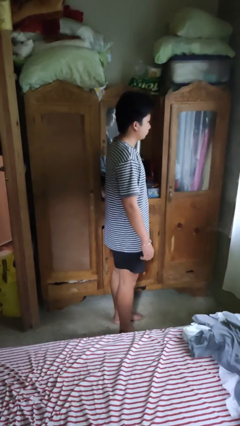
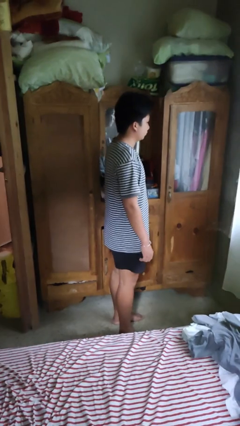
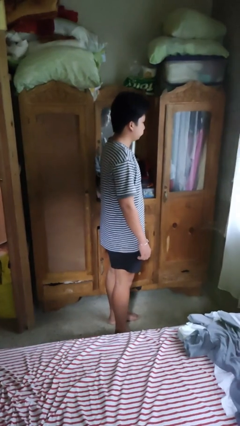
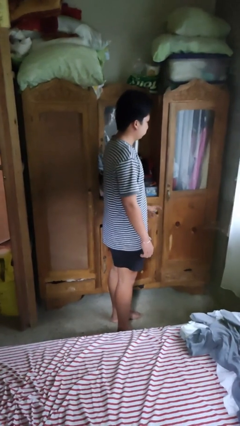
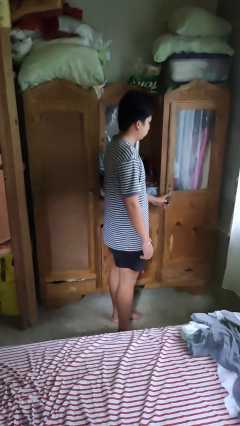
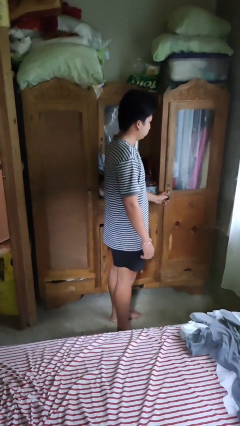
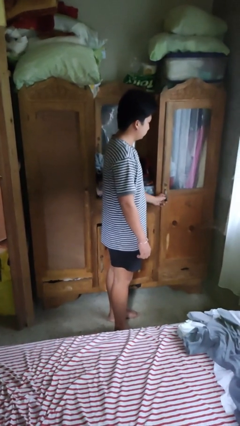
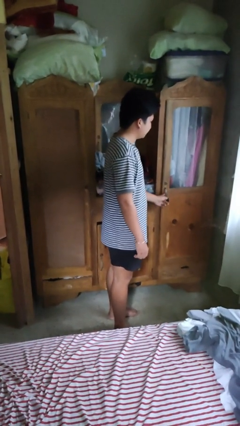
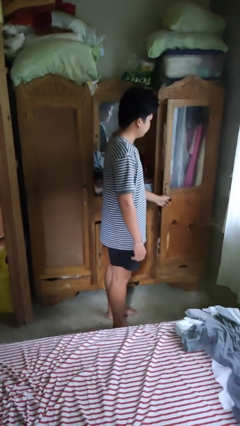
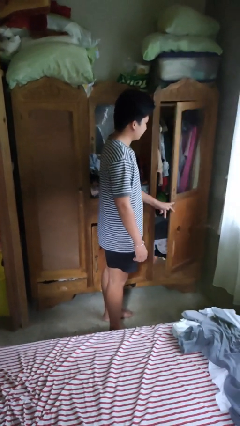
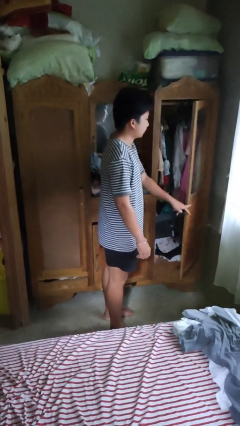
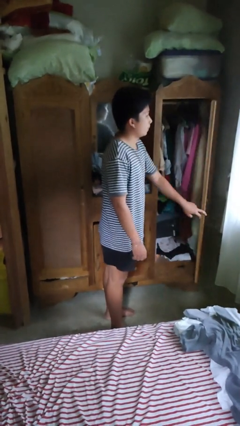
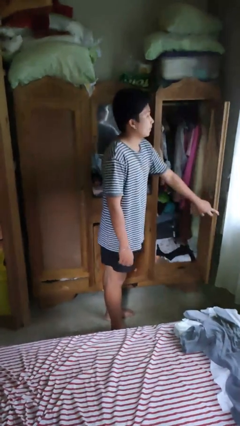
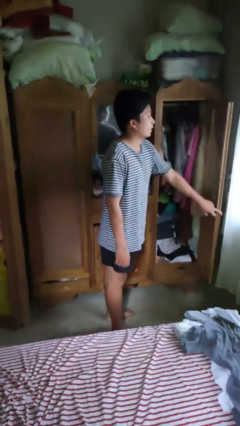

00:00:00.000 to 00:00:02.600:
person opens closet door

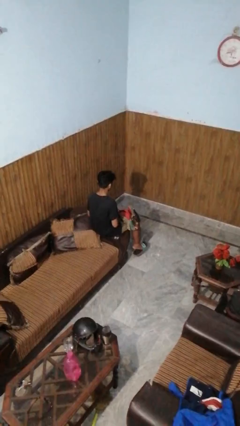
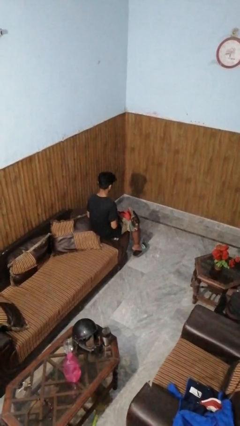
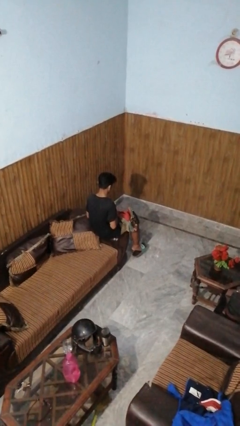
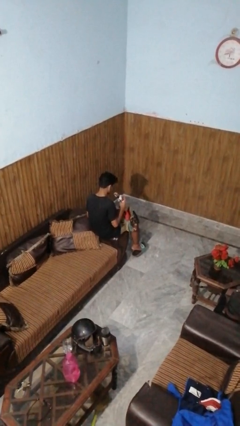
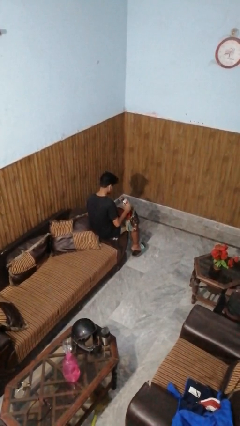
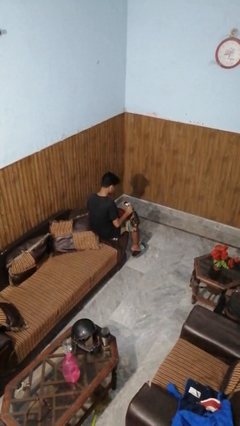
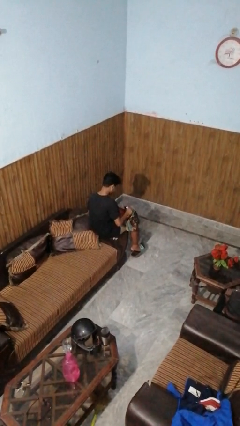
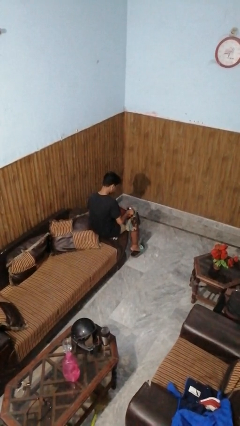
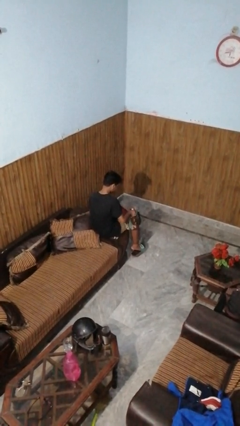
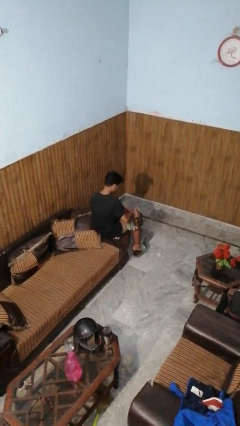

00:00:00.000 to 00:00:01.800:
person puts object into purse

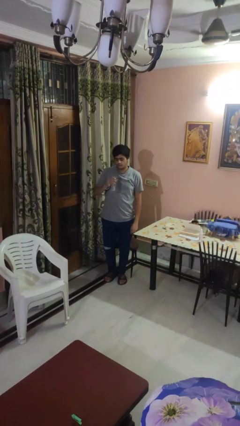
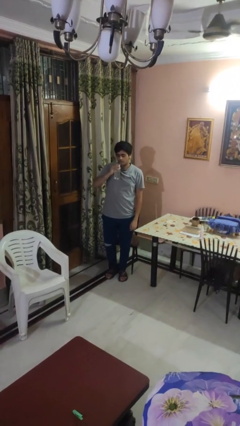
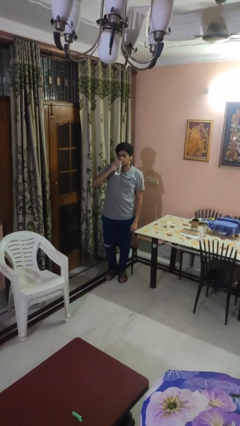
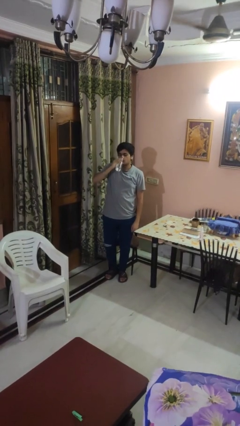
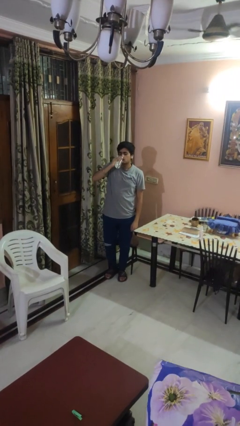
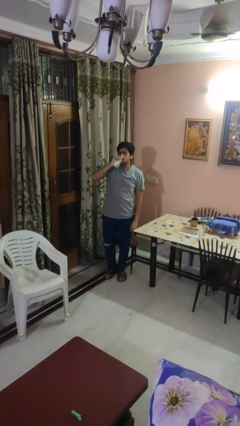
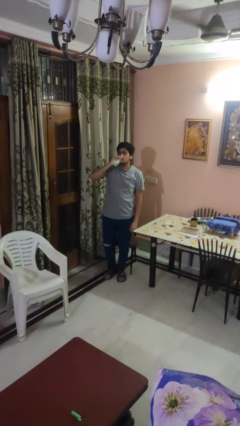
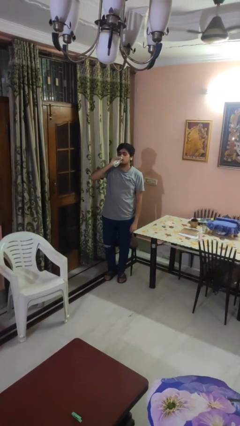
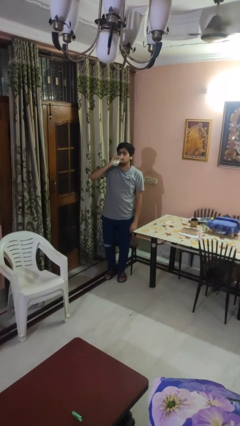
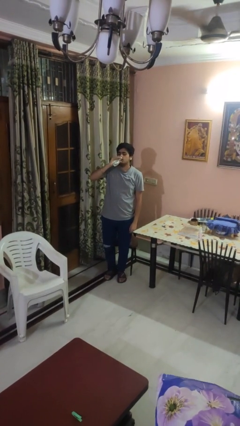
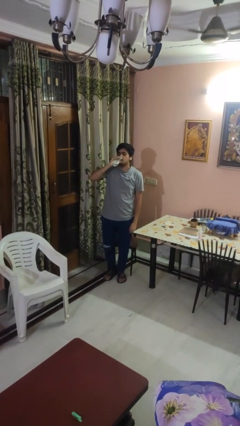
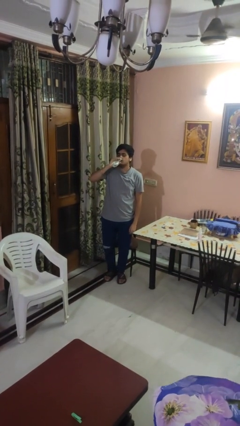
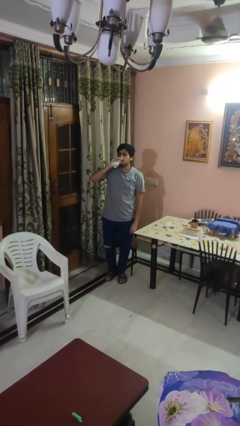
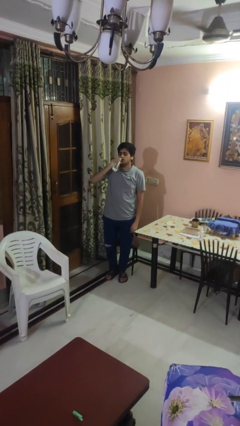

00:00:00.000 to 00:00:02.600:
person drinks from bottle

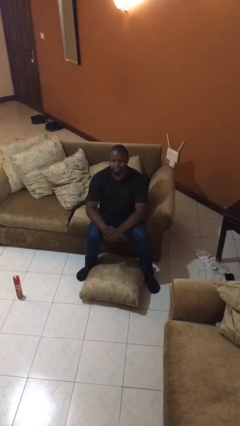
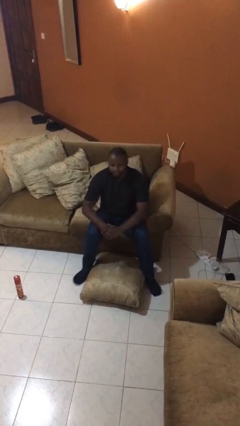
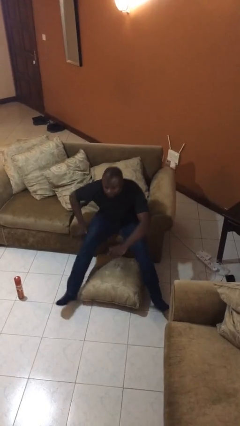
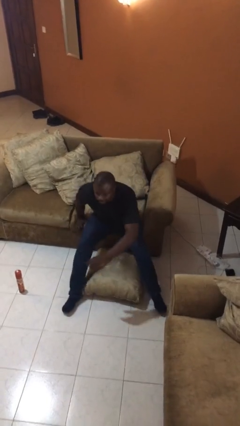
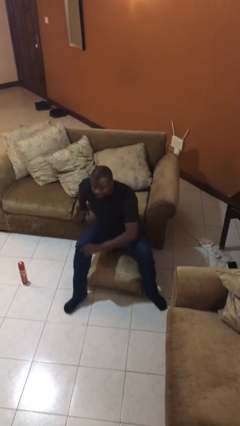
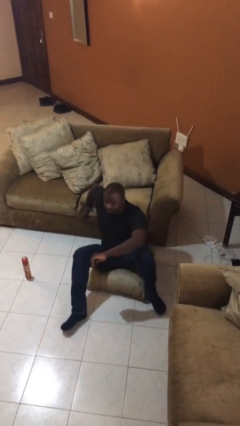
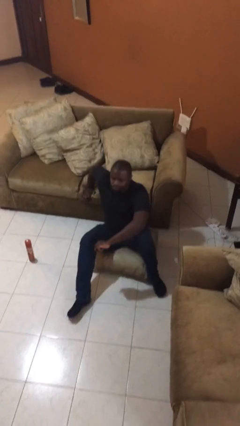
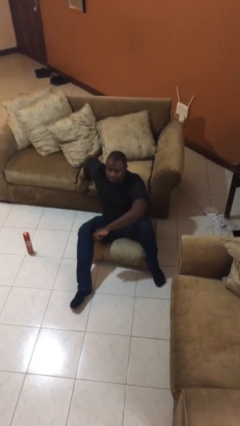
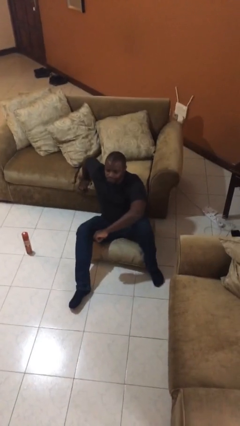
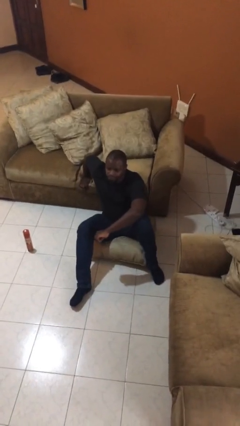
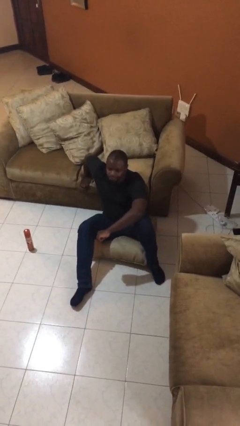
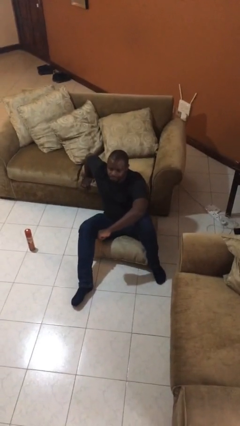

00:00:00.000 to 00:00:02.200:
person falls from chair

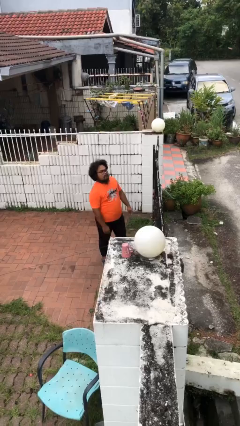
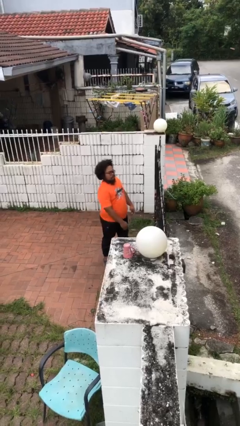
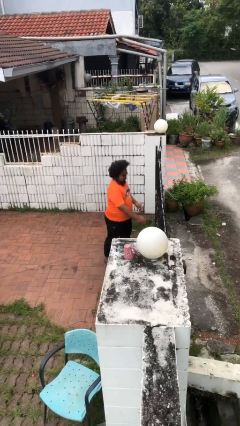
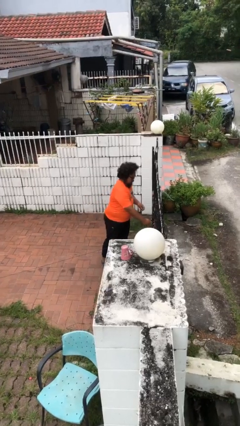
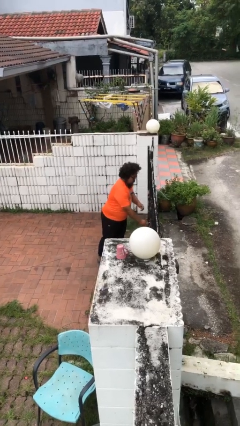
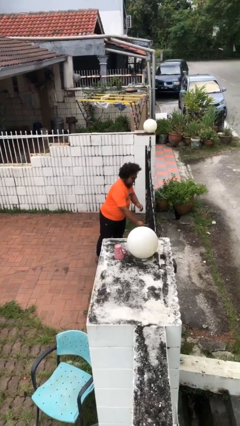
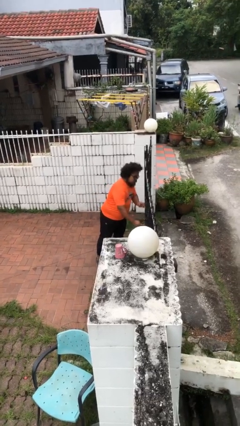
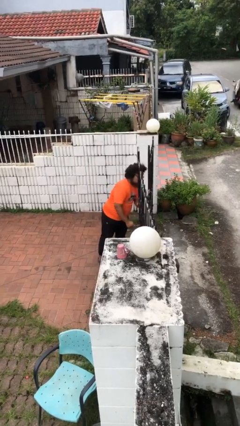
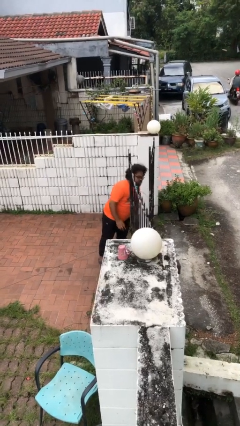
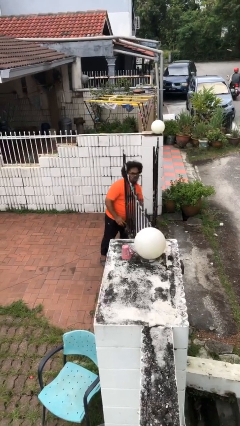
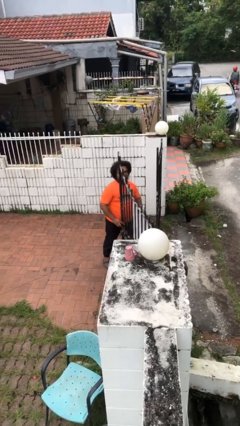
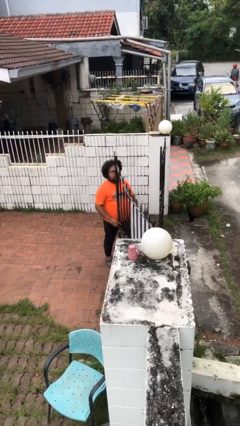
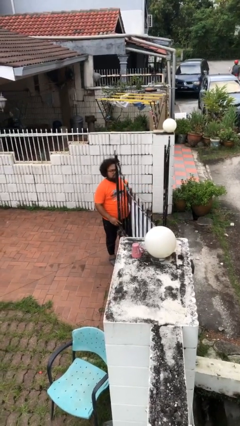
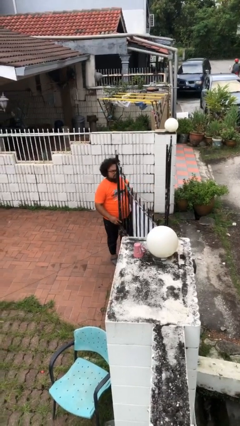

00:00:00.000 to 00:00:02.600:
person opens facility door

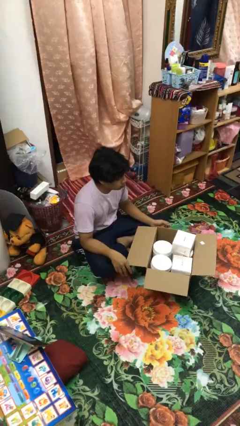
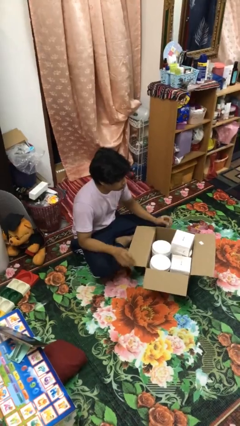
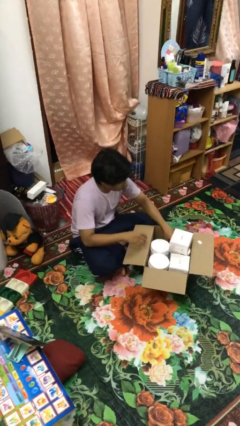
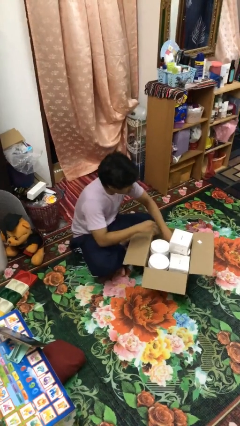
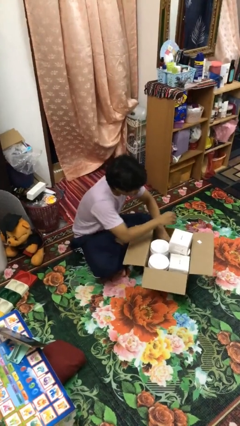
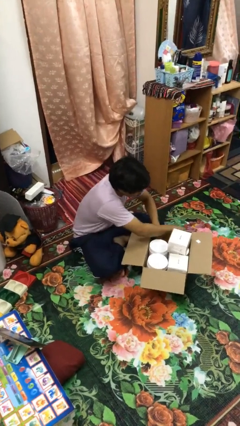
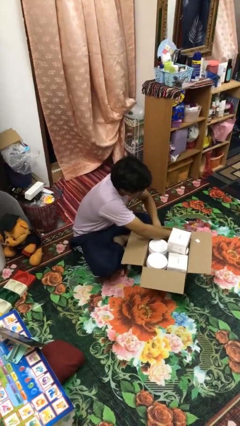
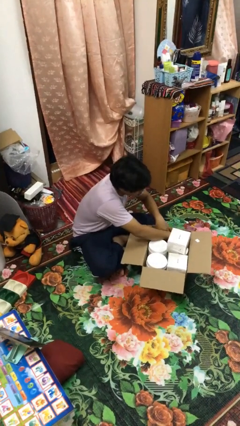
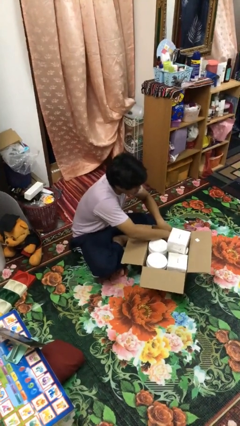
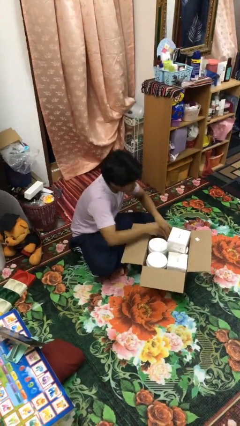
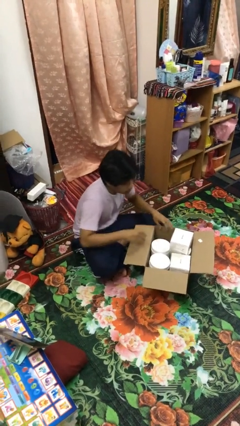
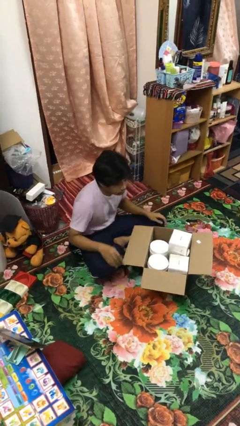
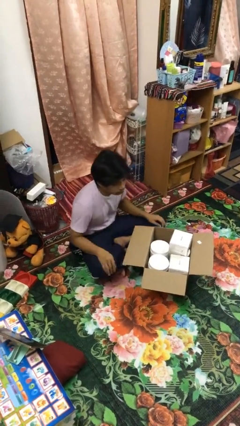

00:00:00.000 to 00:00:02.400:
person searches in box

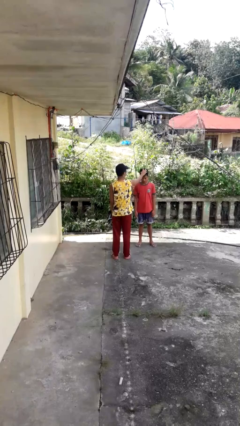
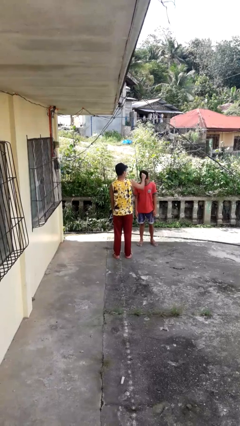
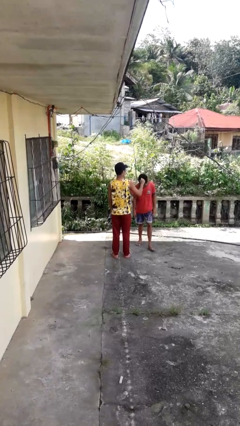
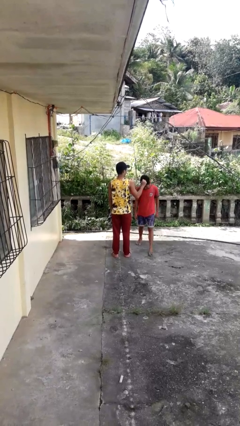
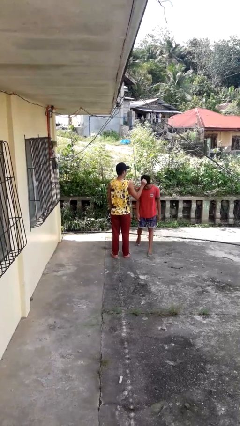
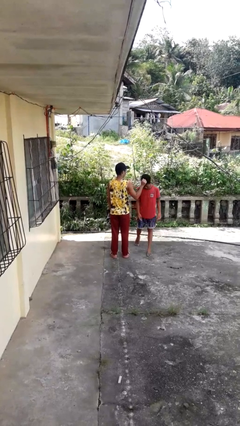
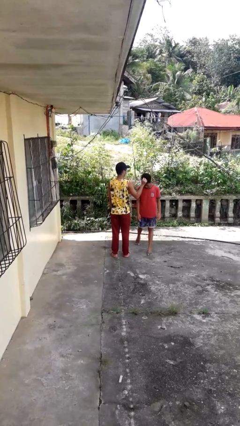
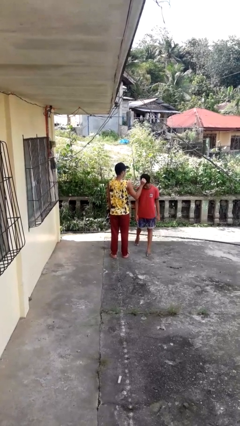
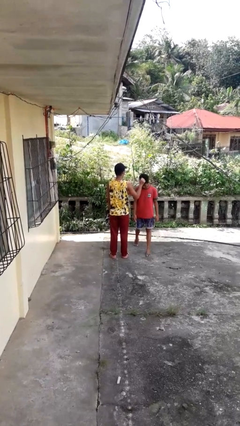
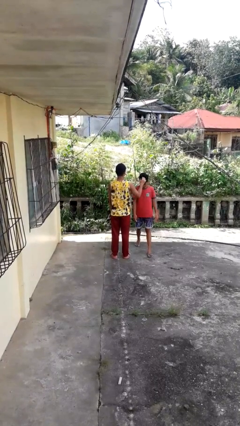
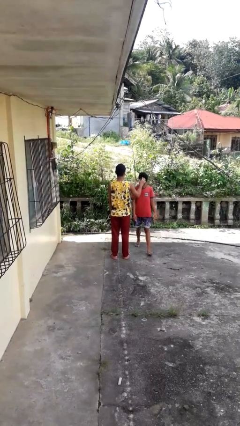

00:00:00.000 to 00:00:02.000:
person grabs person by hair

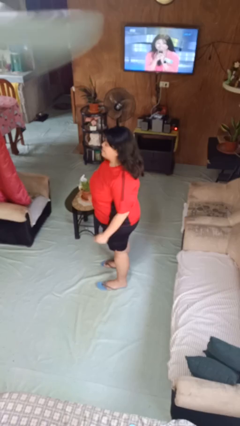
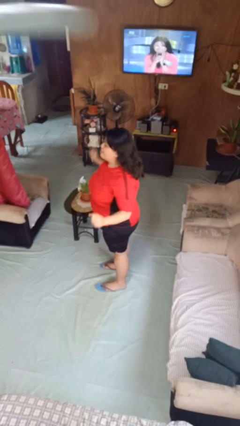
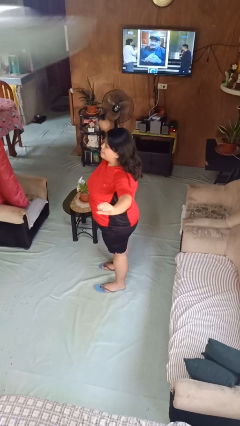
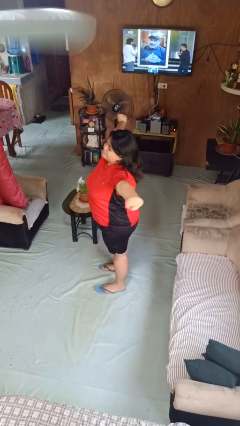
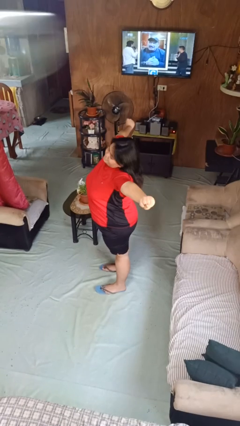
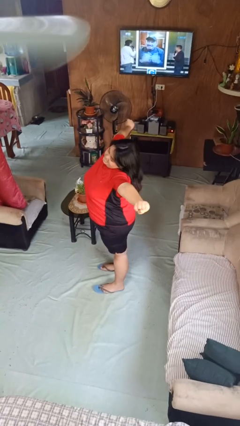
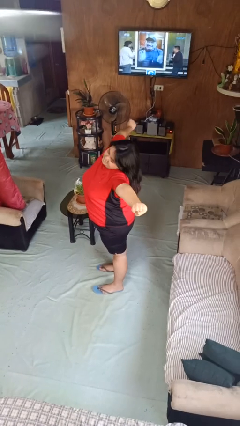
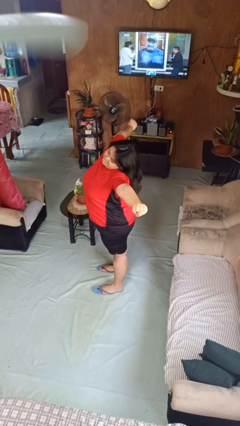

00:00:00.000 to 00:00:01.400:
person stretches arms to side
